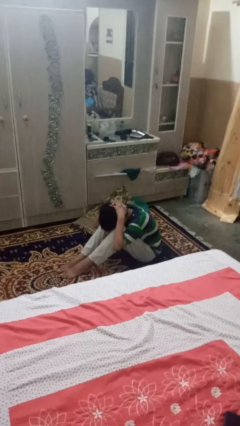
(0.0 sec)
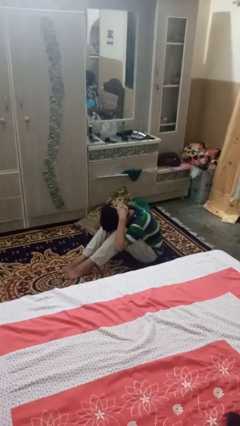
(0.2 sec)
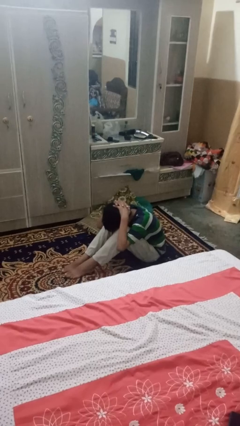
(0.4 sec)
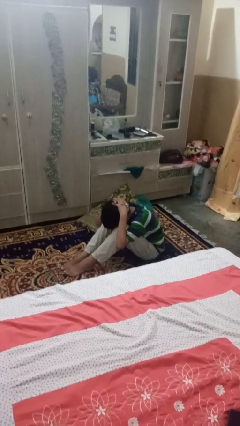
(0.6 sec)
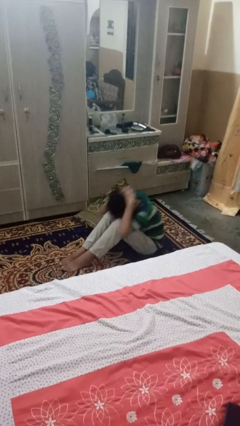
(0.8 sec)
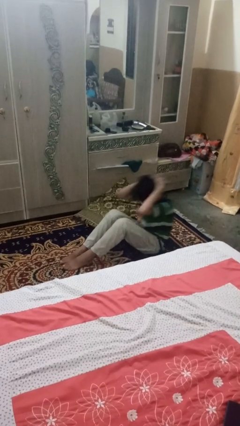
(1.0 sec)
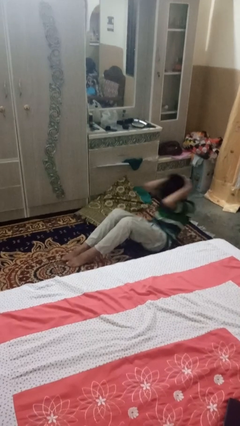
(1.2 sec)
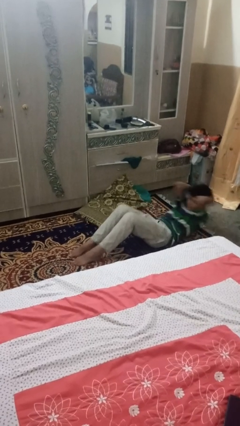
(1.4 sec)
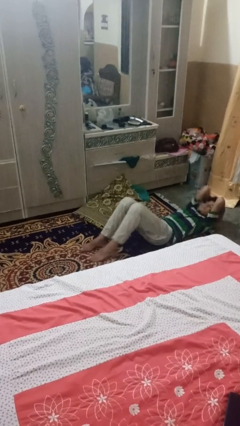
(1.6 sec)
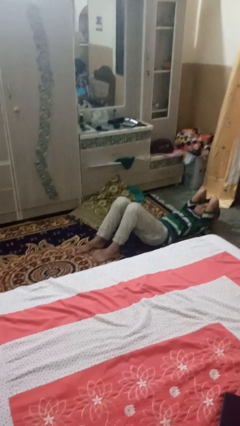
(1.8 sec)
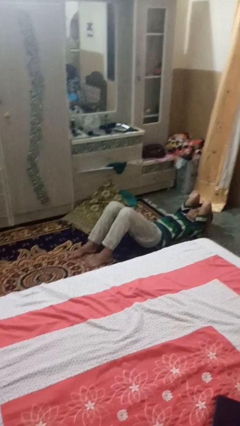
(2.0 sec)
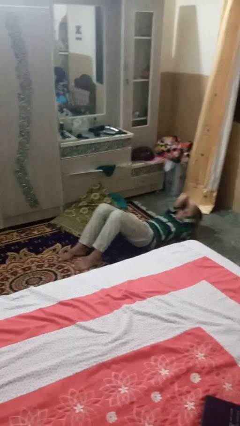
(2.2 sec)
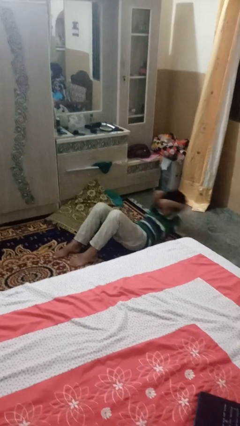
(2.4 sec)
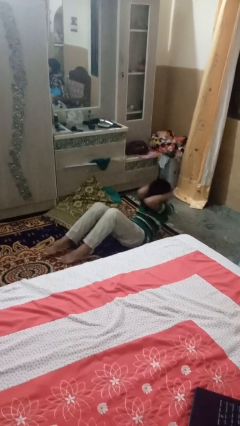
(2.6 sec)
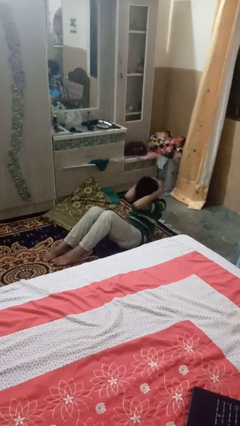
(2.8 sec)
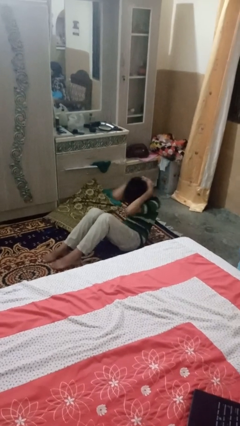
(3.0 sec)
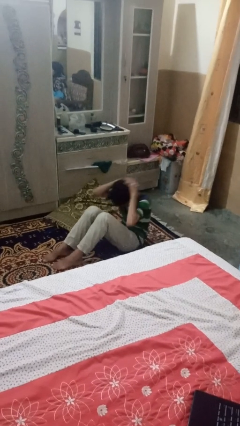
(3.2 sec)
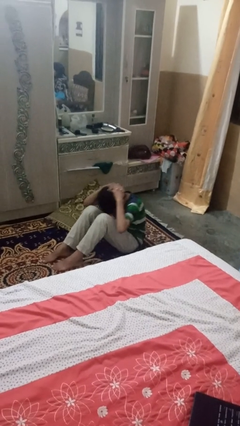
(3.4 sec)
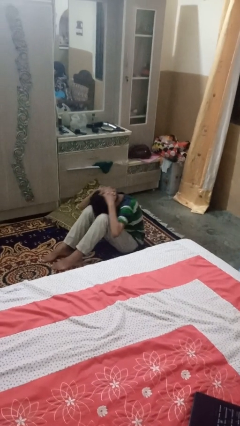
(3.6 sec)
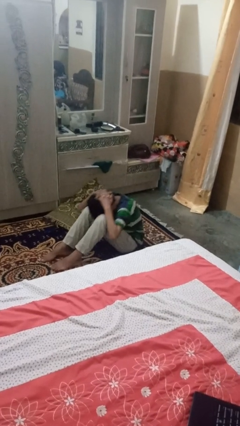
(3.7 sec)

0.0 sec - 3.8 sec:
person exercises with situp

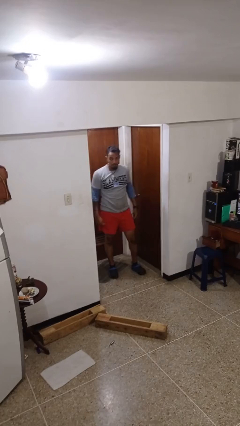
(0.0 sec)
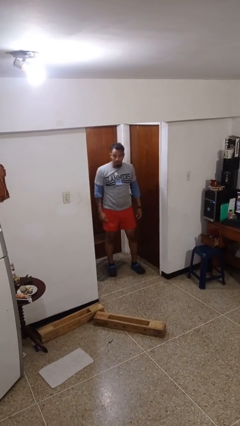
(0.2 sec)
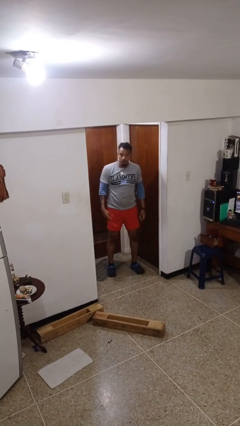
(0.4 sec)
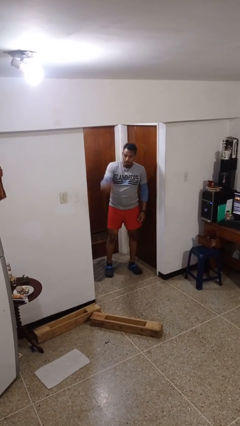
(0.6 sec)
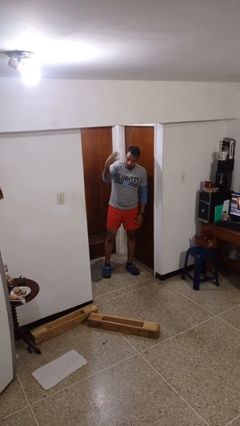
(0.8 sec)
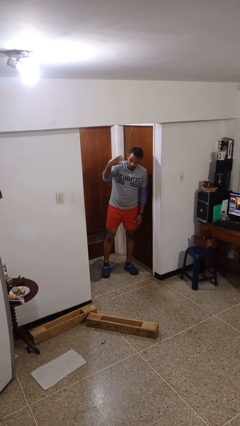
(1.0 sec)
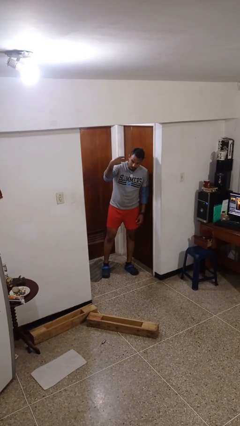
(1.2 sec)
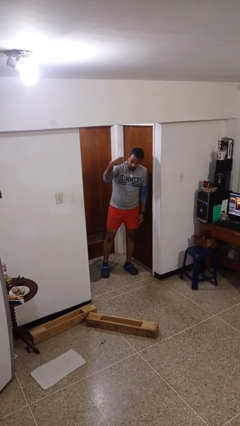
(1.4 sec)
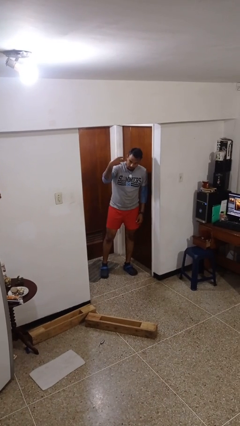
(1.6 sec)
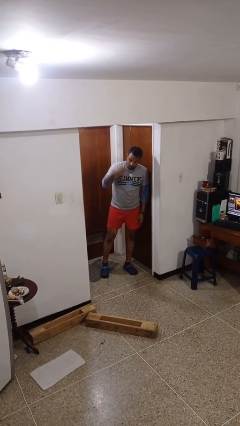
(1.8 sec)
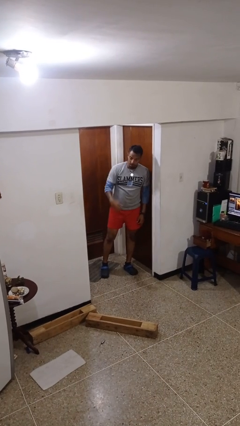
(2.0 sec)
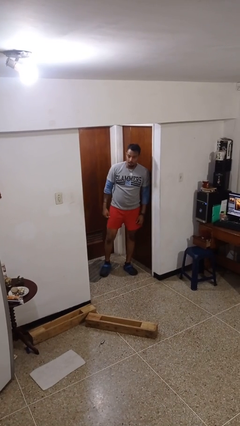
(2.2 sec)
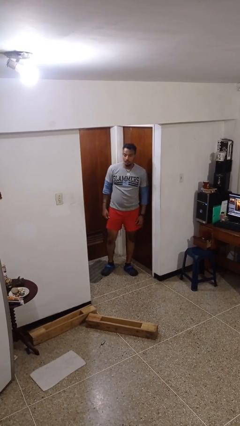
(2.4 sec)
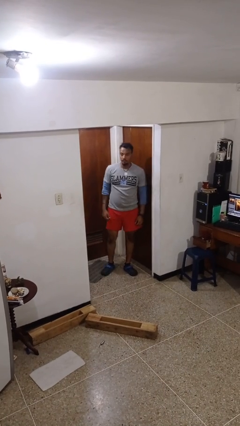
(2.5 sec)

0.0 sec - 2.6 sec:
person gestures come here

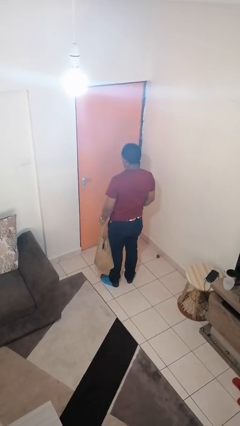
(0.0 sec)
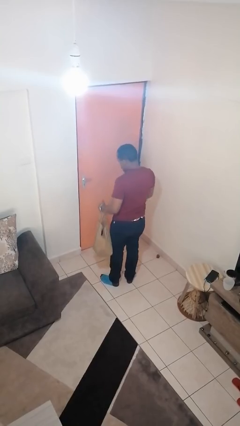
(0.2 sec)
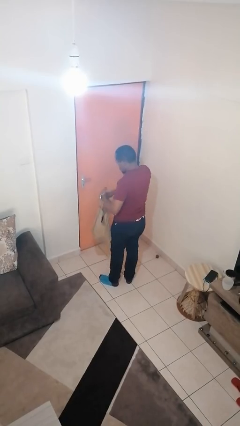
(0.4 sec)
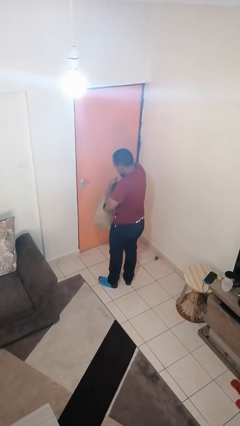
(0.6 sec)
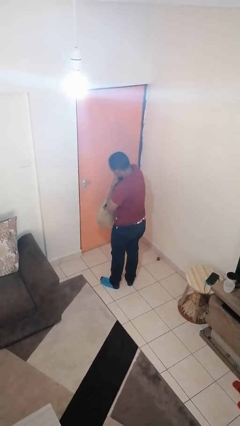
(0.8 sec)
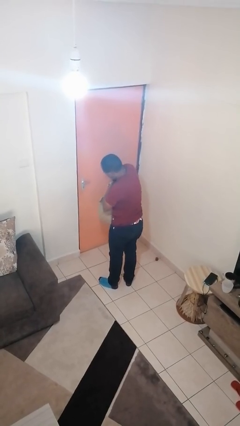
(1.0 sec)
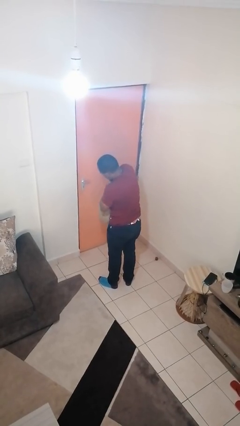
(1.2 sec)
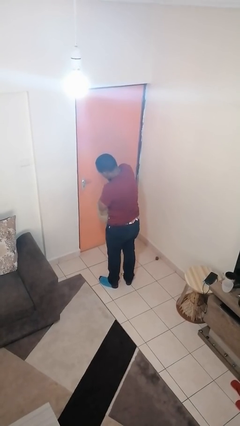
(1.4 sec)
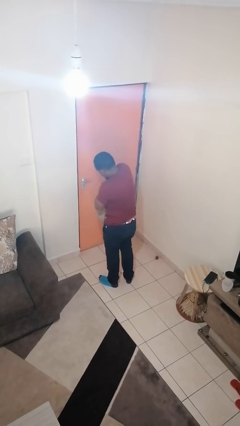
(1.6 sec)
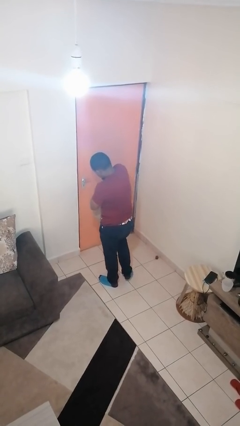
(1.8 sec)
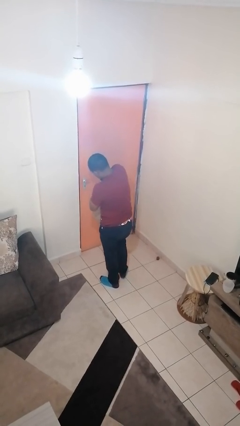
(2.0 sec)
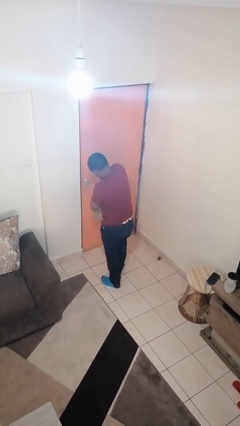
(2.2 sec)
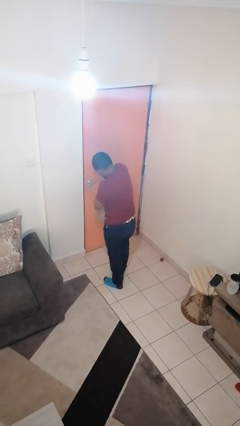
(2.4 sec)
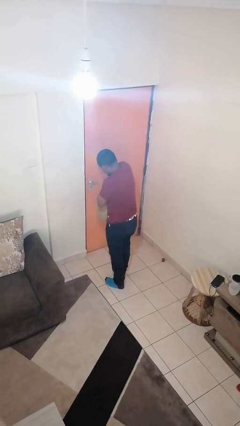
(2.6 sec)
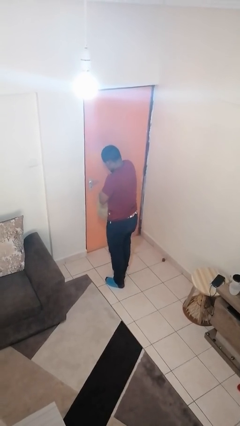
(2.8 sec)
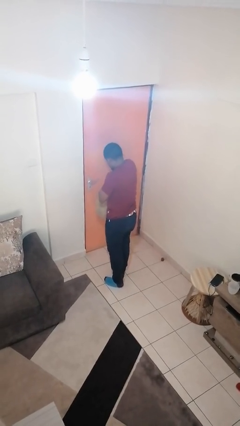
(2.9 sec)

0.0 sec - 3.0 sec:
person searches in bag

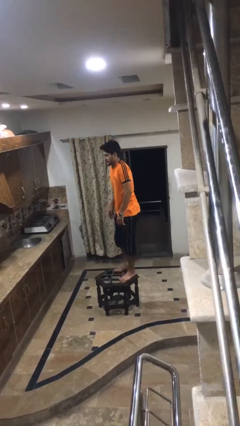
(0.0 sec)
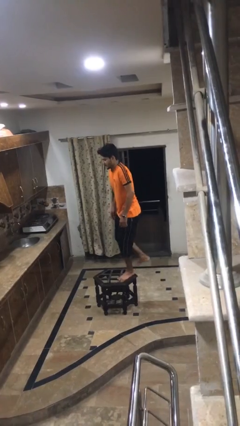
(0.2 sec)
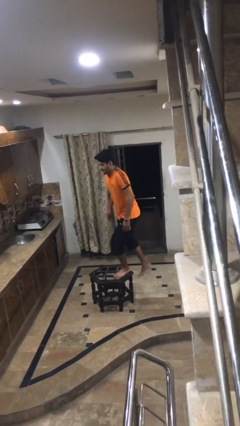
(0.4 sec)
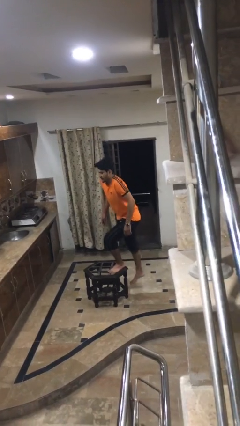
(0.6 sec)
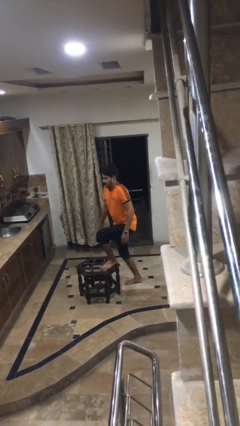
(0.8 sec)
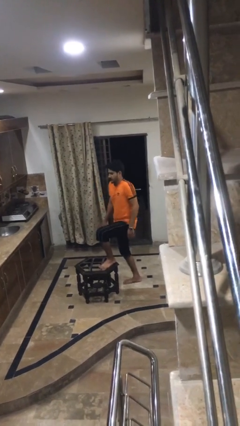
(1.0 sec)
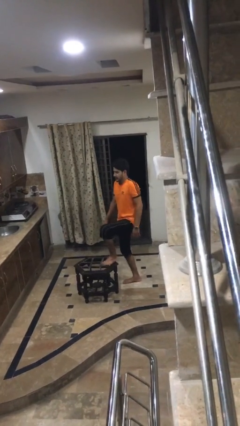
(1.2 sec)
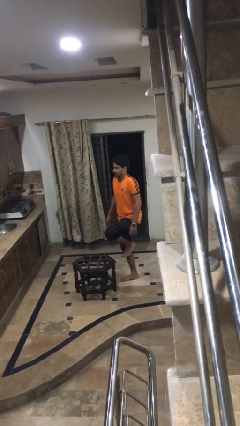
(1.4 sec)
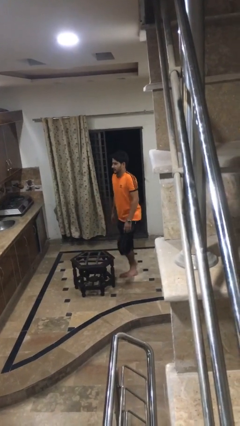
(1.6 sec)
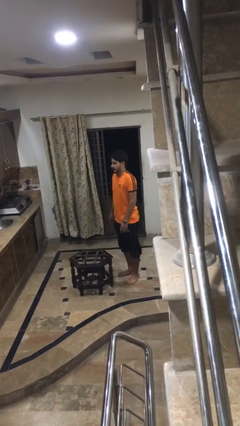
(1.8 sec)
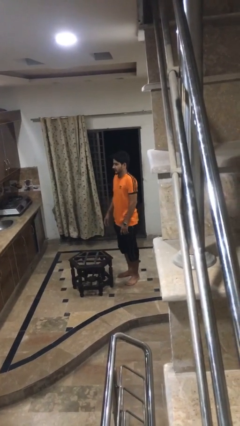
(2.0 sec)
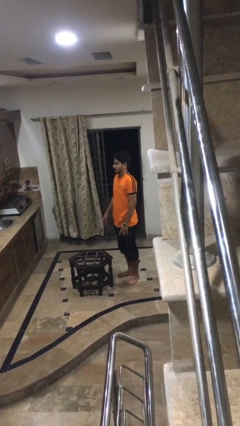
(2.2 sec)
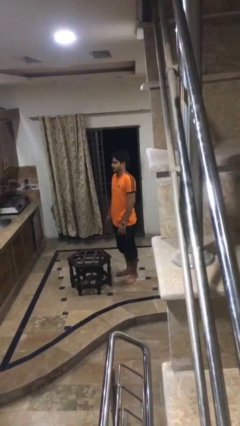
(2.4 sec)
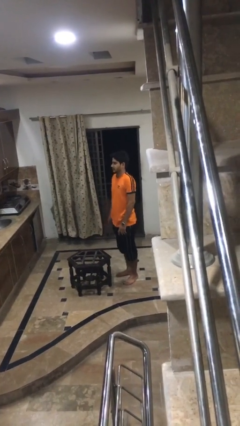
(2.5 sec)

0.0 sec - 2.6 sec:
person climbs off table

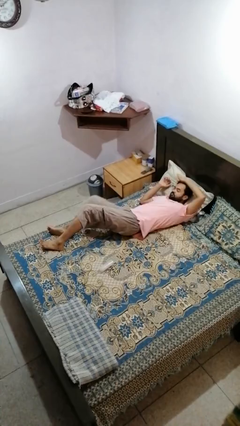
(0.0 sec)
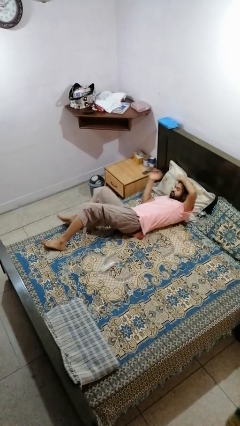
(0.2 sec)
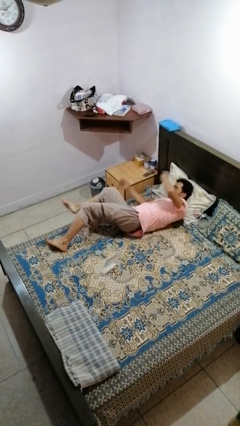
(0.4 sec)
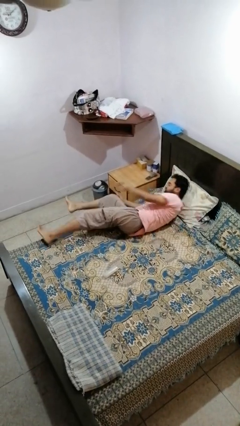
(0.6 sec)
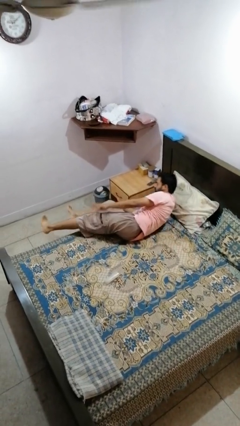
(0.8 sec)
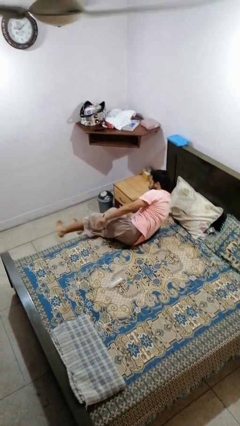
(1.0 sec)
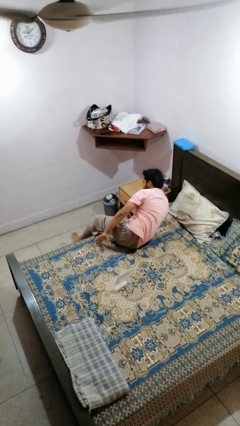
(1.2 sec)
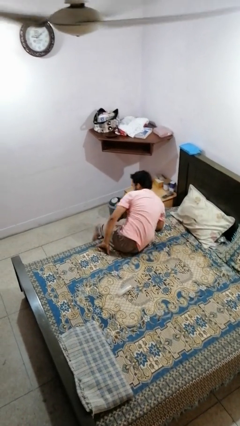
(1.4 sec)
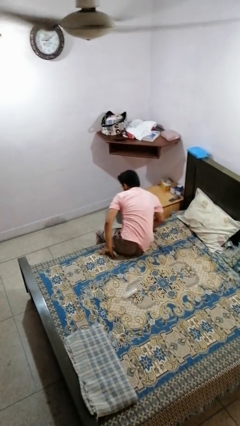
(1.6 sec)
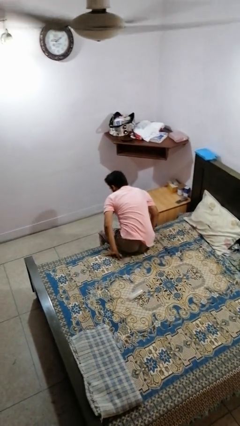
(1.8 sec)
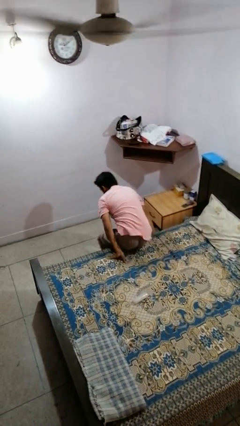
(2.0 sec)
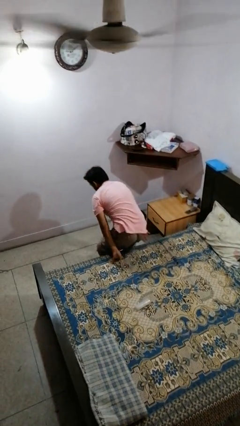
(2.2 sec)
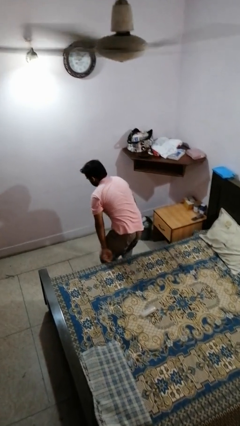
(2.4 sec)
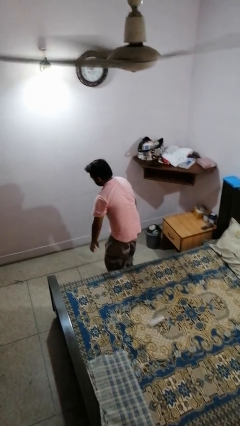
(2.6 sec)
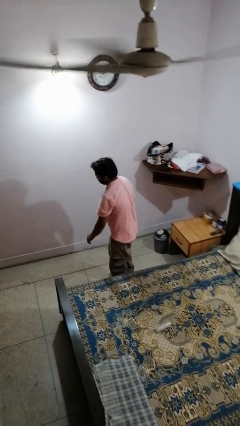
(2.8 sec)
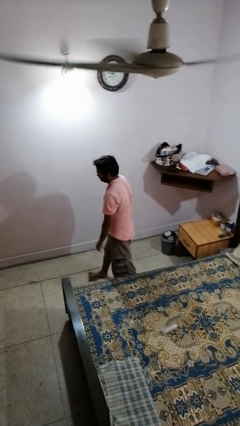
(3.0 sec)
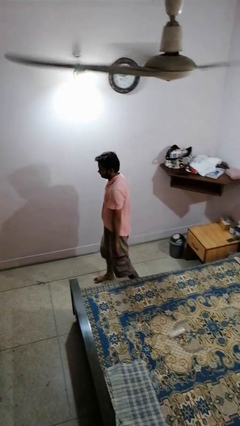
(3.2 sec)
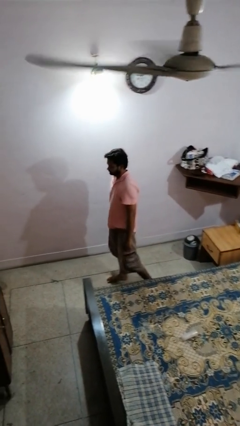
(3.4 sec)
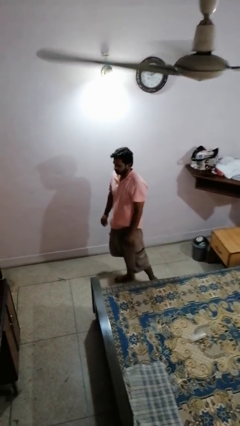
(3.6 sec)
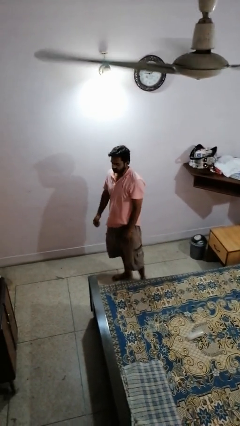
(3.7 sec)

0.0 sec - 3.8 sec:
person stands up

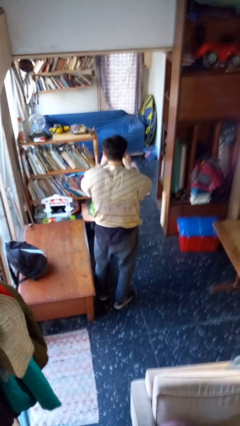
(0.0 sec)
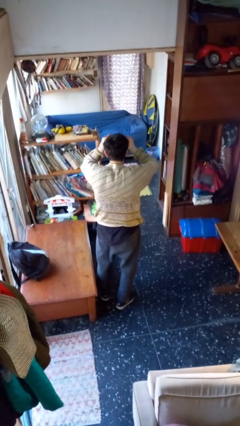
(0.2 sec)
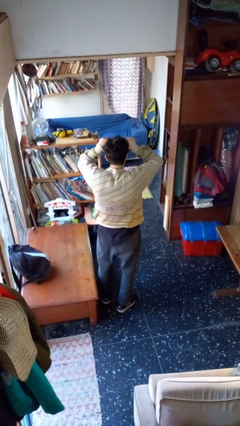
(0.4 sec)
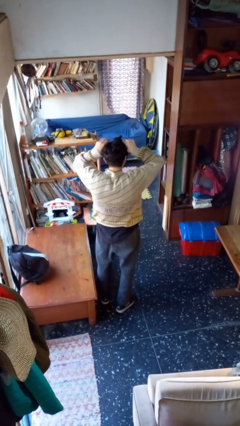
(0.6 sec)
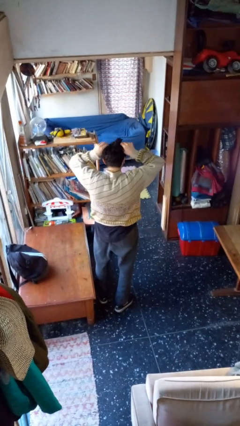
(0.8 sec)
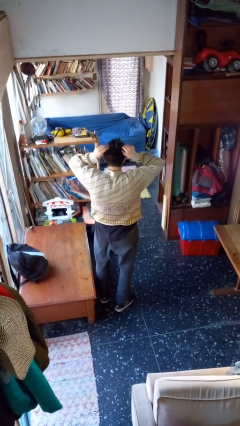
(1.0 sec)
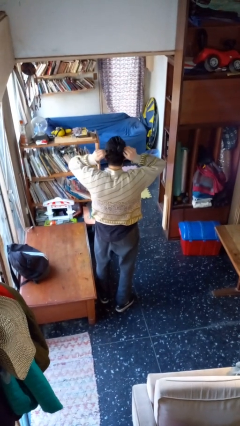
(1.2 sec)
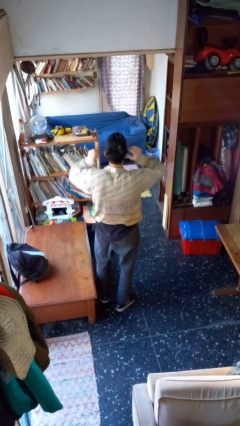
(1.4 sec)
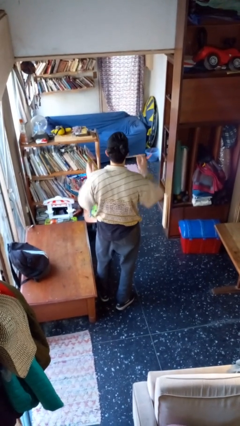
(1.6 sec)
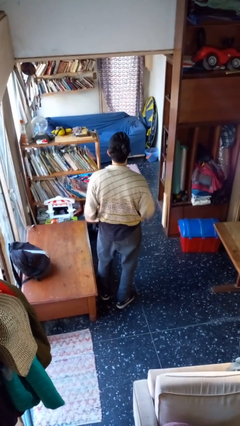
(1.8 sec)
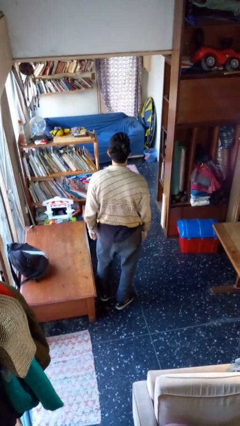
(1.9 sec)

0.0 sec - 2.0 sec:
person puts on facemask
